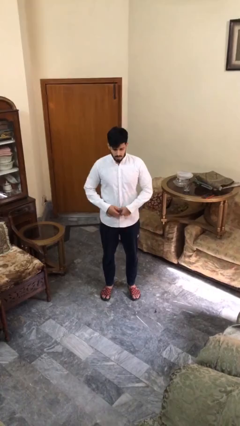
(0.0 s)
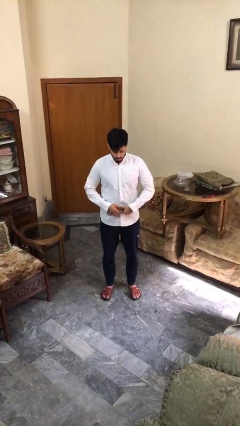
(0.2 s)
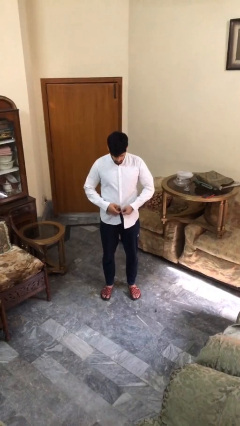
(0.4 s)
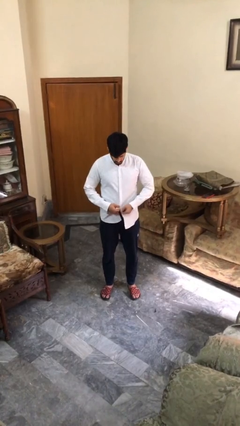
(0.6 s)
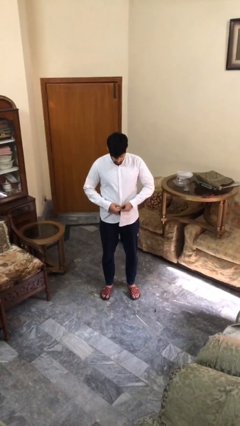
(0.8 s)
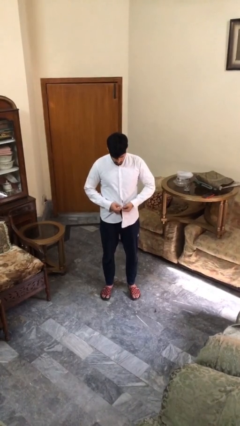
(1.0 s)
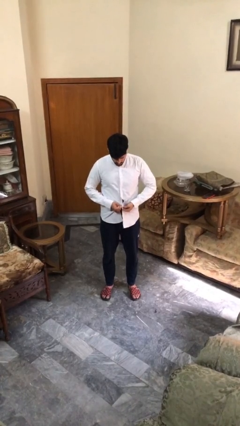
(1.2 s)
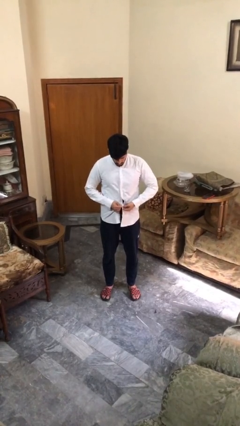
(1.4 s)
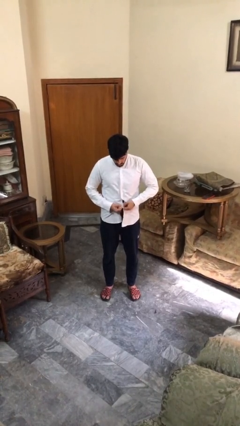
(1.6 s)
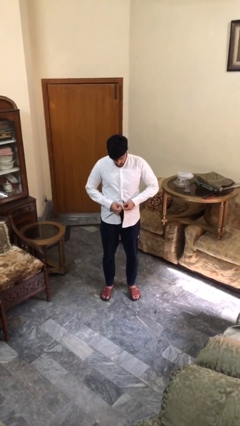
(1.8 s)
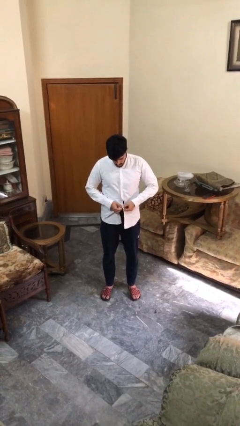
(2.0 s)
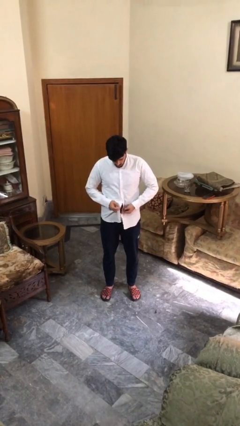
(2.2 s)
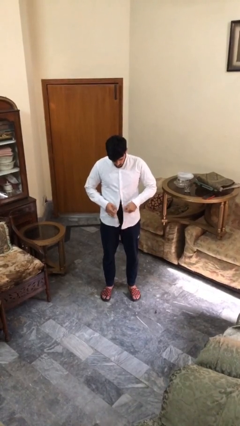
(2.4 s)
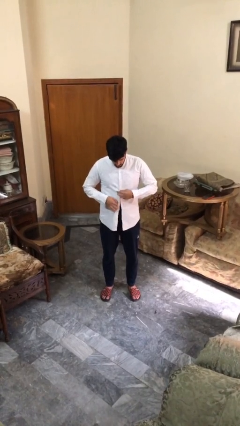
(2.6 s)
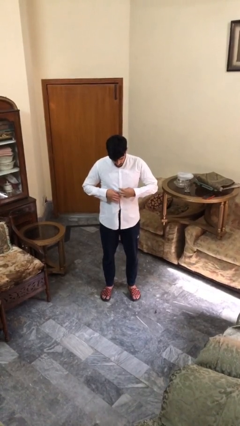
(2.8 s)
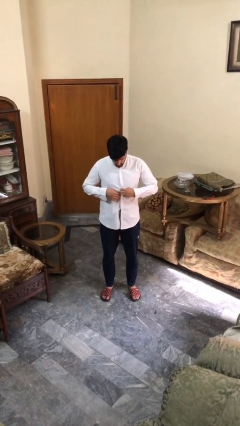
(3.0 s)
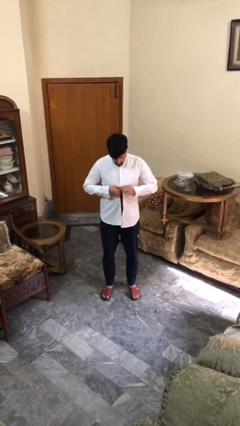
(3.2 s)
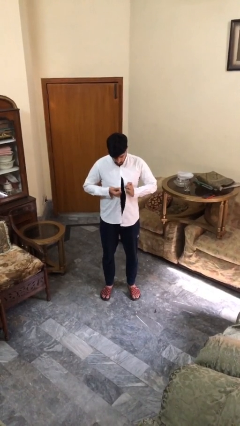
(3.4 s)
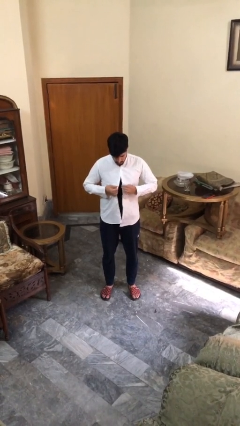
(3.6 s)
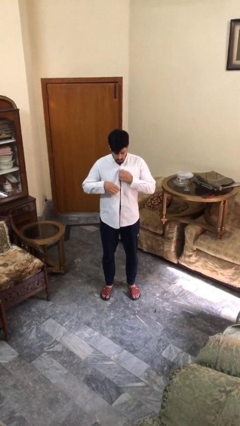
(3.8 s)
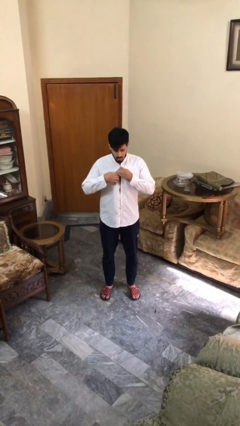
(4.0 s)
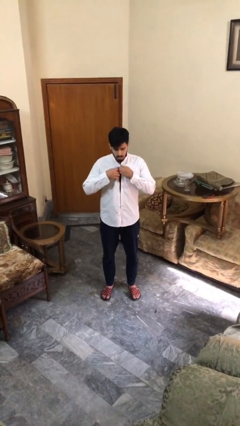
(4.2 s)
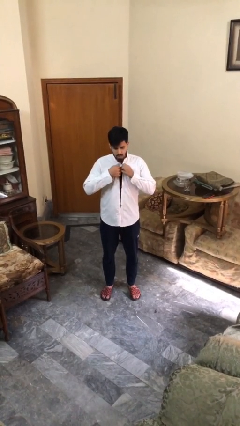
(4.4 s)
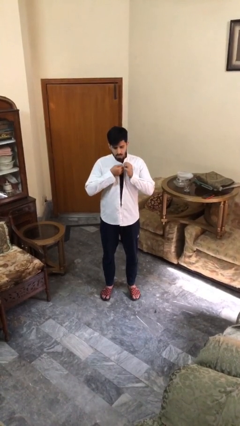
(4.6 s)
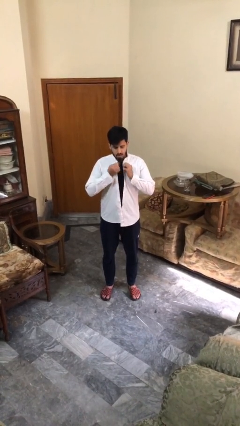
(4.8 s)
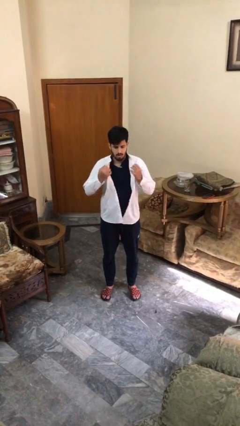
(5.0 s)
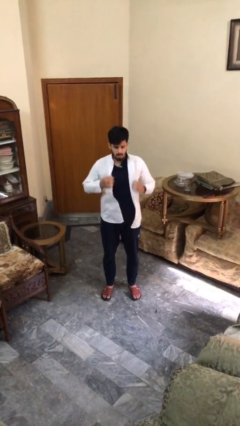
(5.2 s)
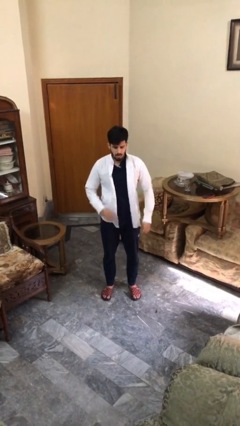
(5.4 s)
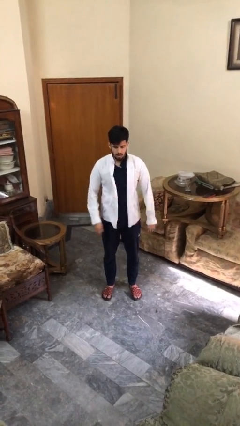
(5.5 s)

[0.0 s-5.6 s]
person unbuttons shirt

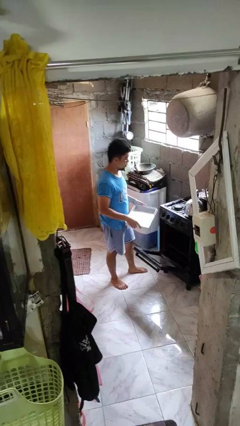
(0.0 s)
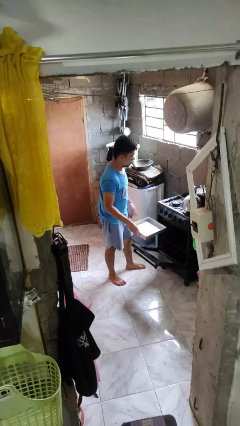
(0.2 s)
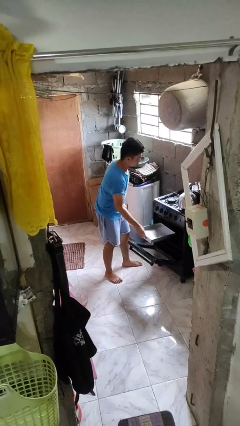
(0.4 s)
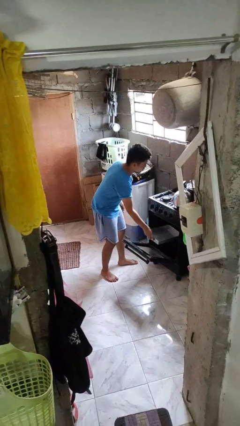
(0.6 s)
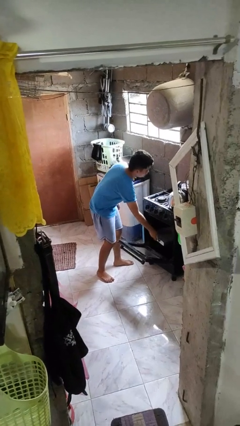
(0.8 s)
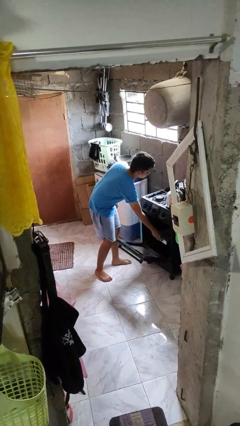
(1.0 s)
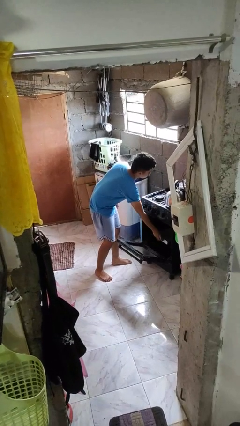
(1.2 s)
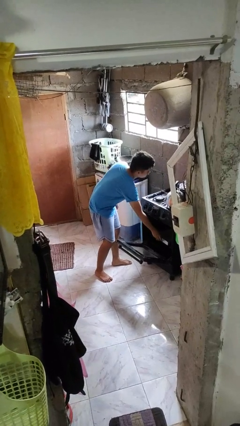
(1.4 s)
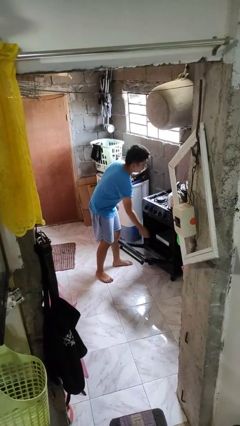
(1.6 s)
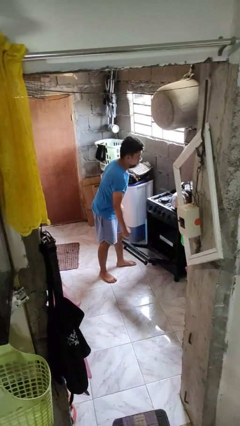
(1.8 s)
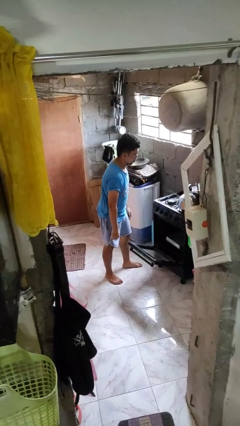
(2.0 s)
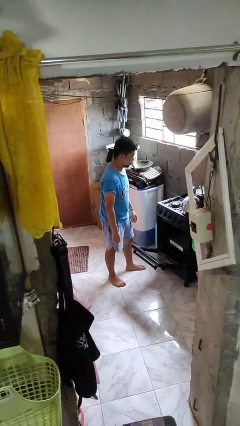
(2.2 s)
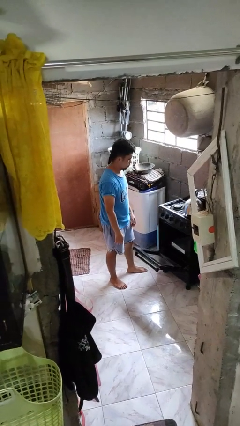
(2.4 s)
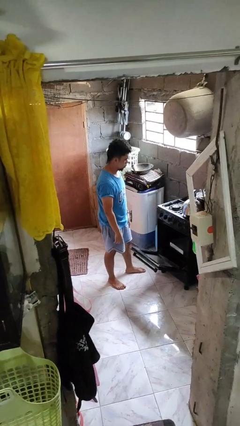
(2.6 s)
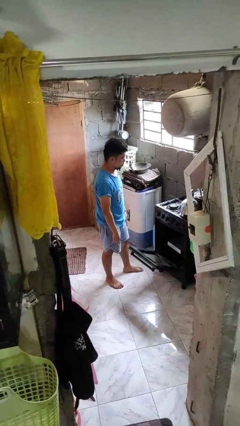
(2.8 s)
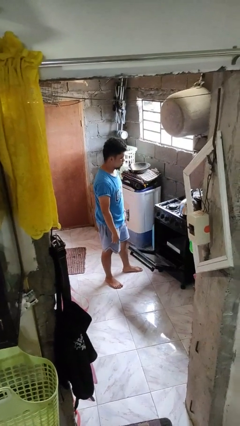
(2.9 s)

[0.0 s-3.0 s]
person puts object into oven

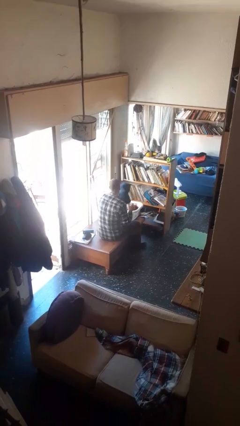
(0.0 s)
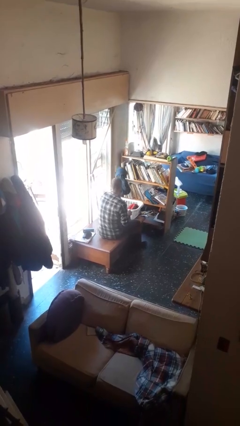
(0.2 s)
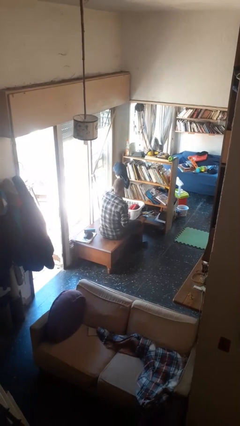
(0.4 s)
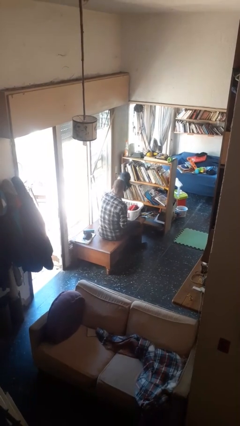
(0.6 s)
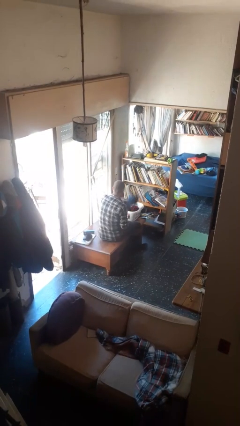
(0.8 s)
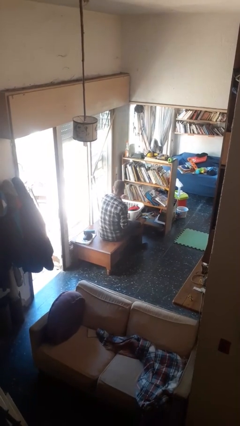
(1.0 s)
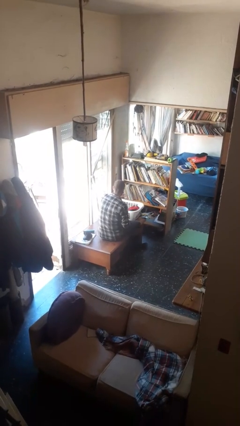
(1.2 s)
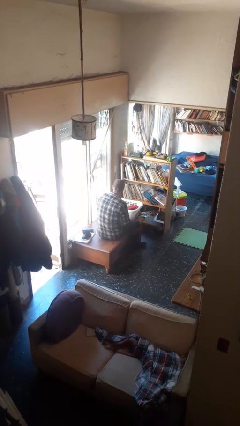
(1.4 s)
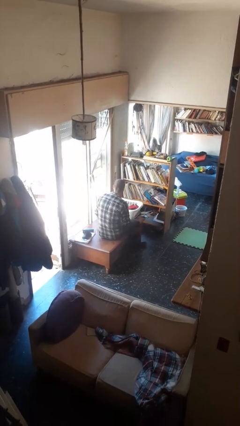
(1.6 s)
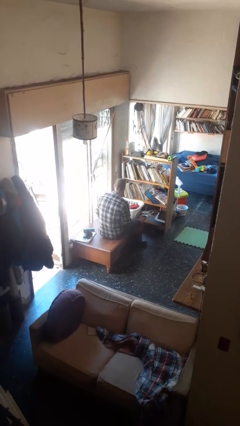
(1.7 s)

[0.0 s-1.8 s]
person puts object into basket

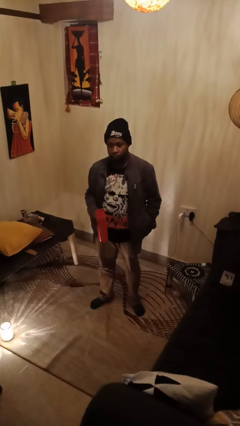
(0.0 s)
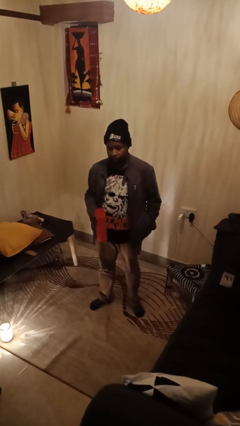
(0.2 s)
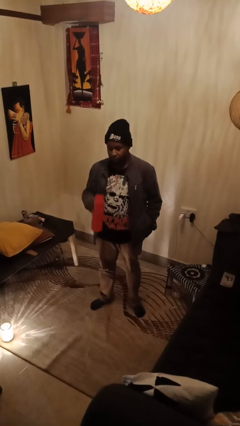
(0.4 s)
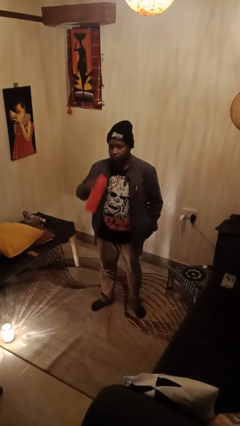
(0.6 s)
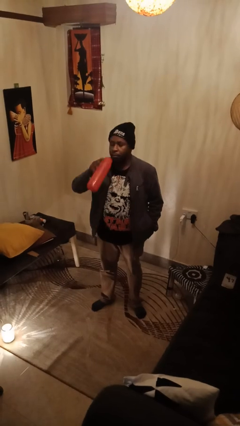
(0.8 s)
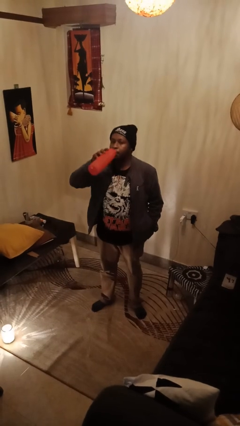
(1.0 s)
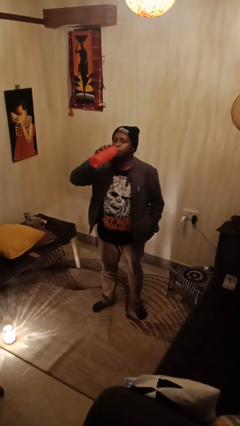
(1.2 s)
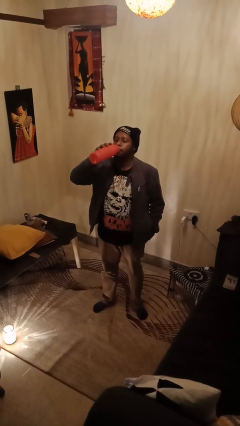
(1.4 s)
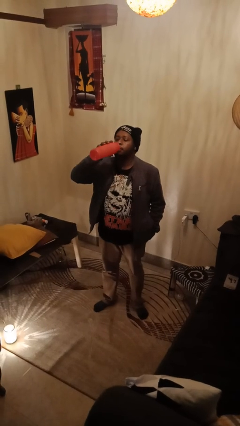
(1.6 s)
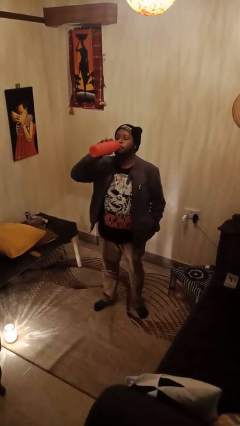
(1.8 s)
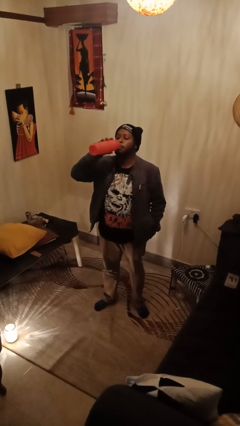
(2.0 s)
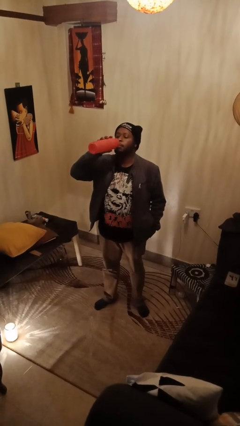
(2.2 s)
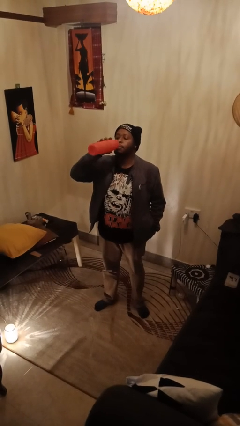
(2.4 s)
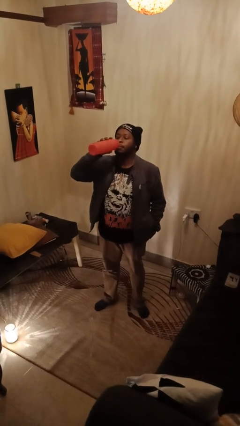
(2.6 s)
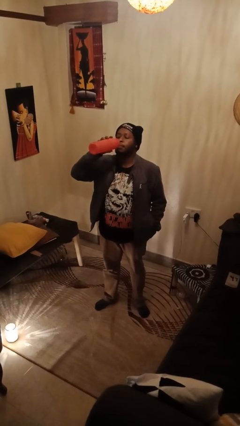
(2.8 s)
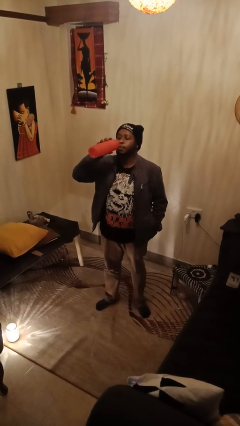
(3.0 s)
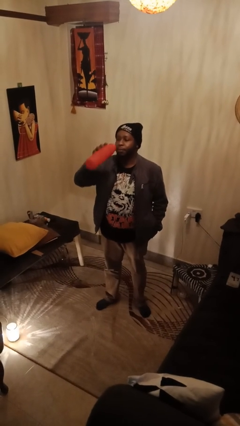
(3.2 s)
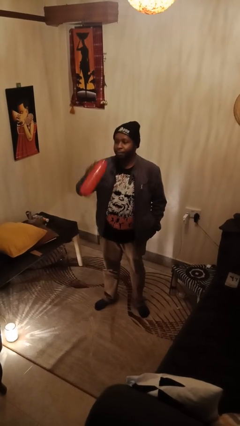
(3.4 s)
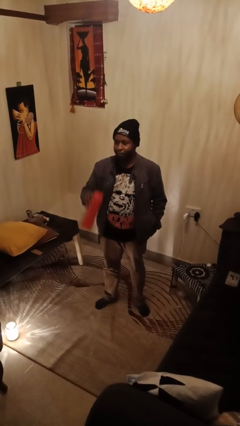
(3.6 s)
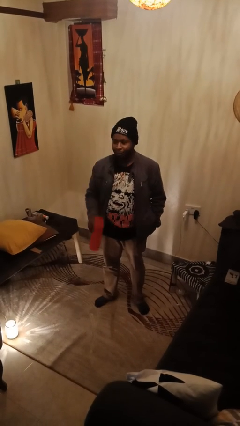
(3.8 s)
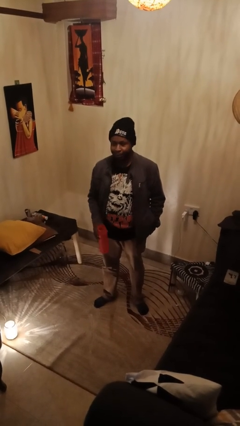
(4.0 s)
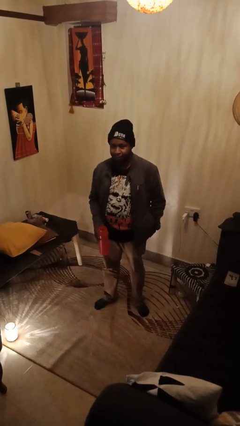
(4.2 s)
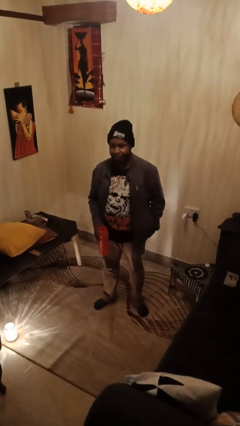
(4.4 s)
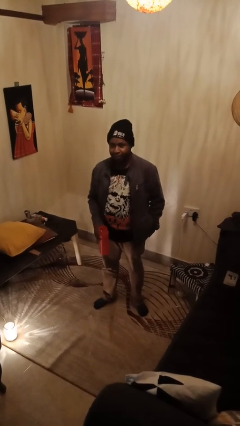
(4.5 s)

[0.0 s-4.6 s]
person drinks from bottle

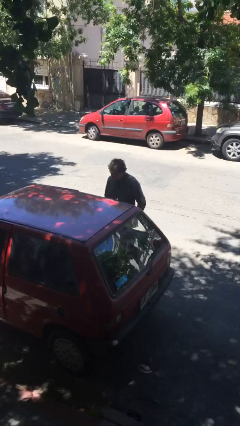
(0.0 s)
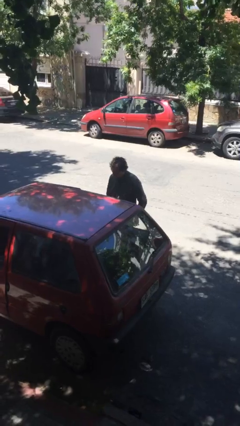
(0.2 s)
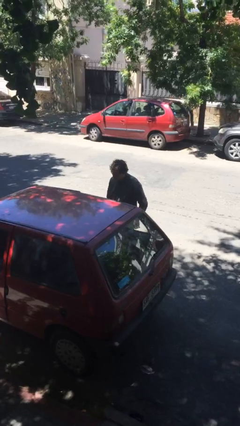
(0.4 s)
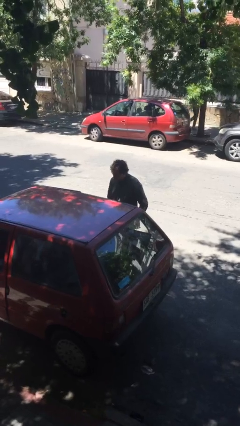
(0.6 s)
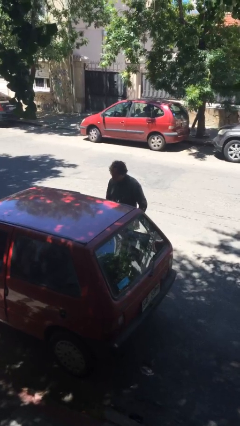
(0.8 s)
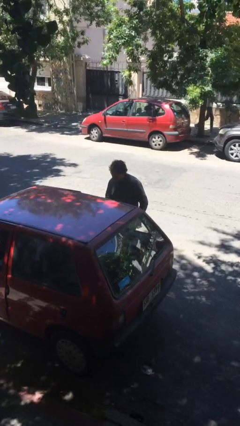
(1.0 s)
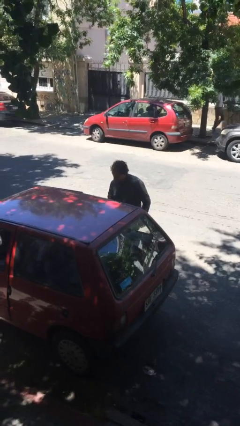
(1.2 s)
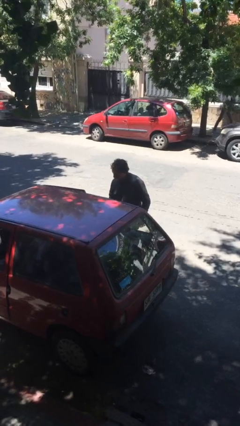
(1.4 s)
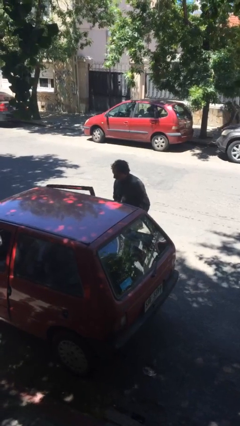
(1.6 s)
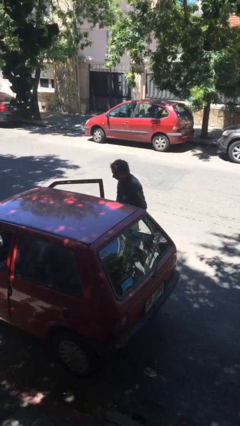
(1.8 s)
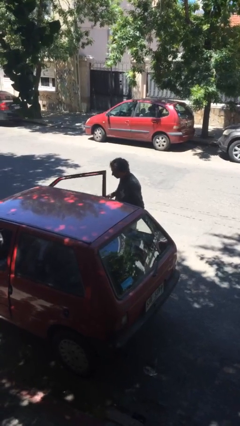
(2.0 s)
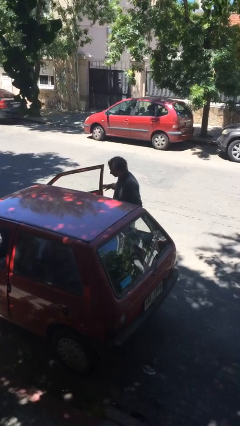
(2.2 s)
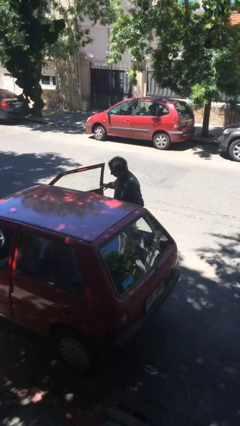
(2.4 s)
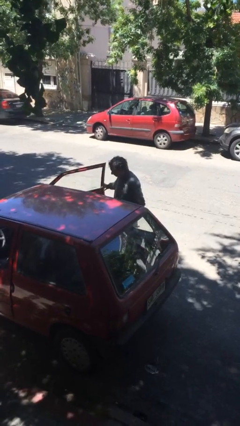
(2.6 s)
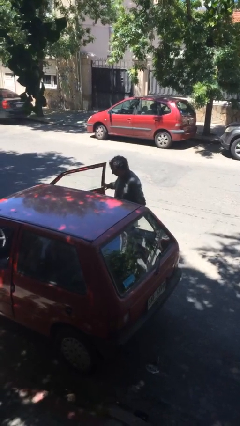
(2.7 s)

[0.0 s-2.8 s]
person opens car door
